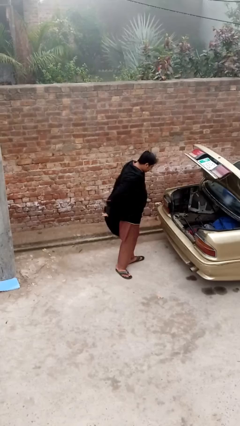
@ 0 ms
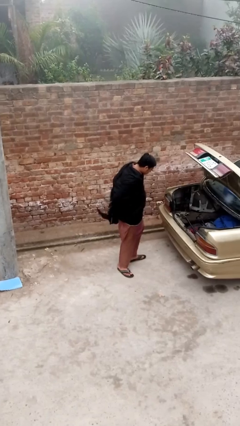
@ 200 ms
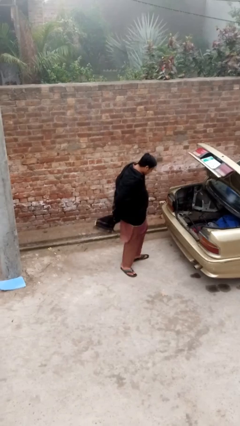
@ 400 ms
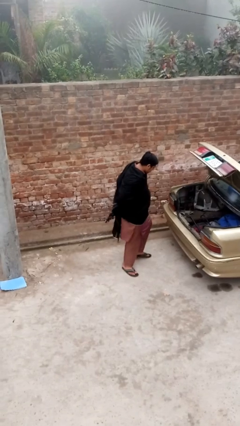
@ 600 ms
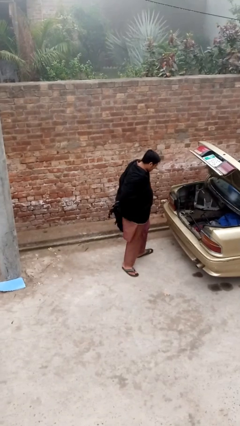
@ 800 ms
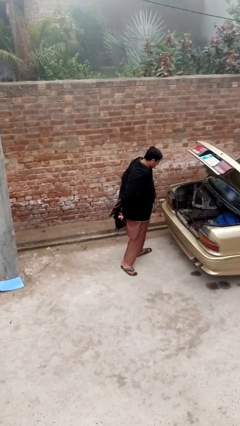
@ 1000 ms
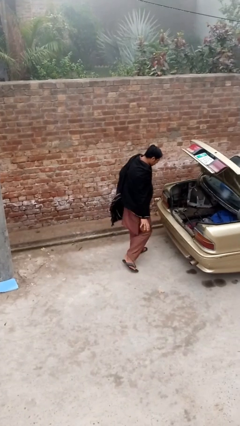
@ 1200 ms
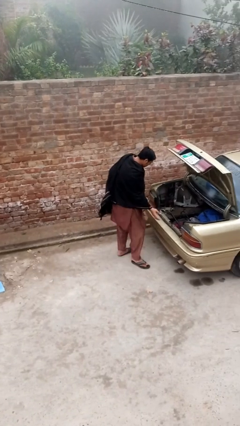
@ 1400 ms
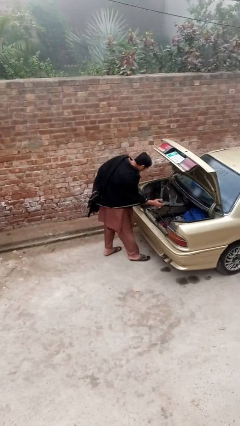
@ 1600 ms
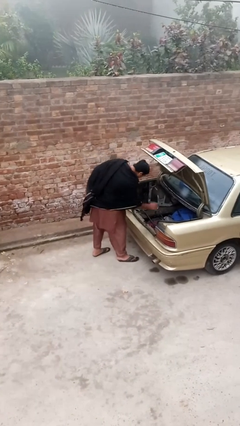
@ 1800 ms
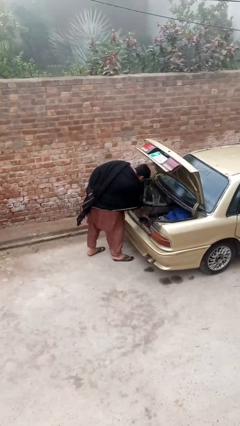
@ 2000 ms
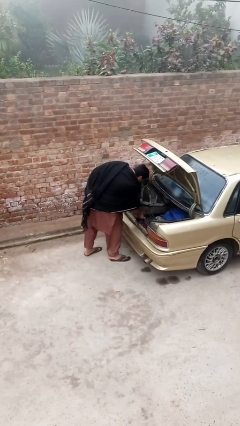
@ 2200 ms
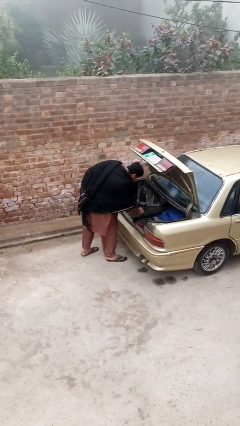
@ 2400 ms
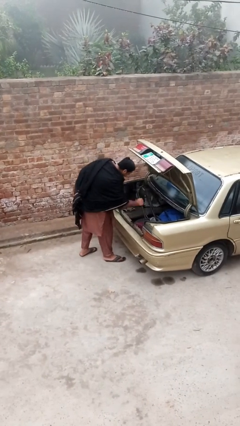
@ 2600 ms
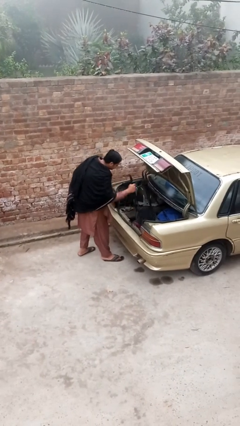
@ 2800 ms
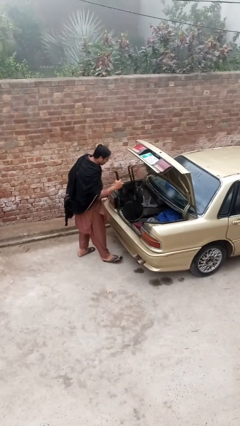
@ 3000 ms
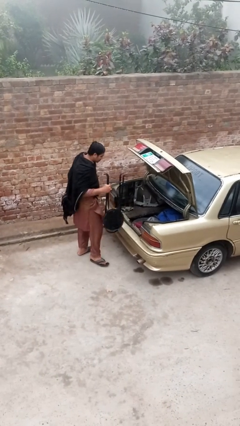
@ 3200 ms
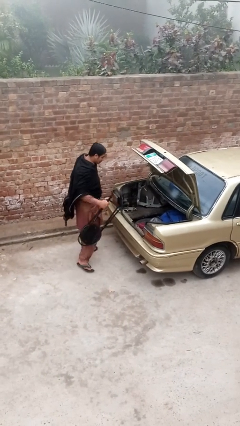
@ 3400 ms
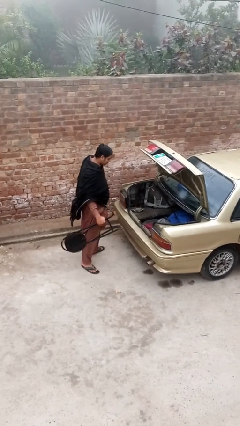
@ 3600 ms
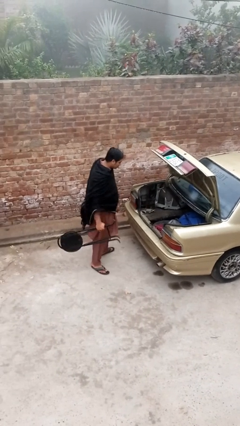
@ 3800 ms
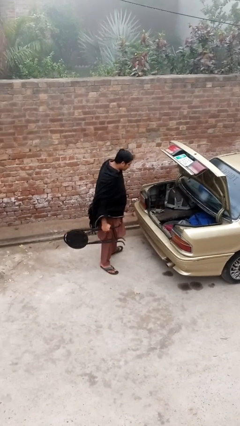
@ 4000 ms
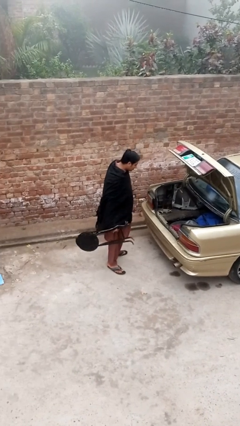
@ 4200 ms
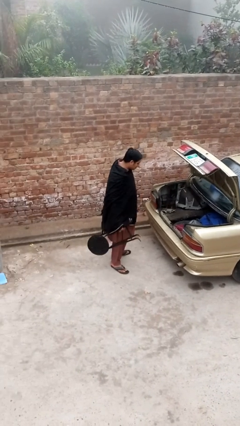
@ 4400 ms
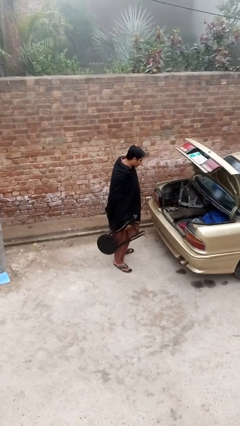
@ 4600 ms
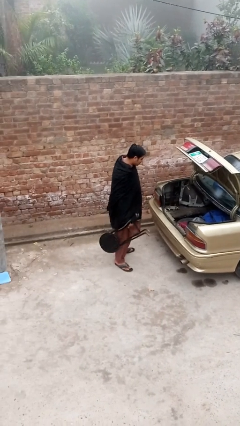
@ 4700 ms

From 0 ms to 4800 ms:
person unloads car

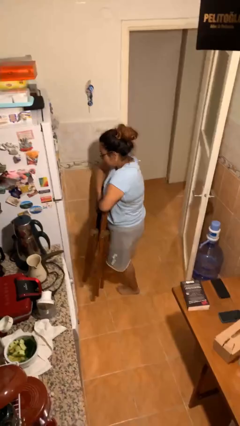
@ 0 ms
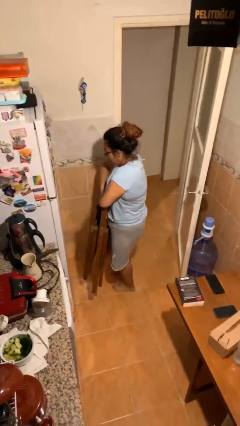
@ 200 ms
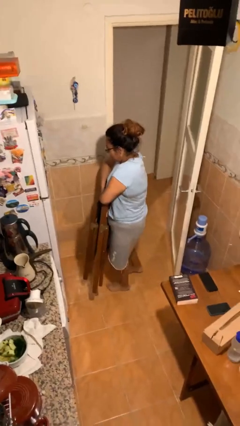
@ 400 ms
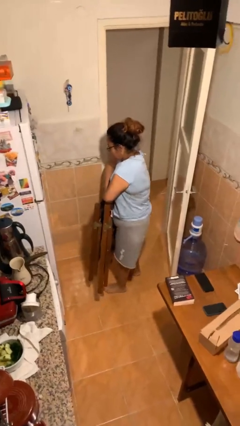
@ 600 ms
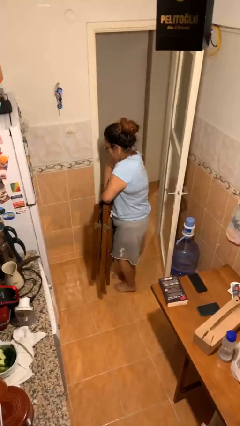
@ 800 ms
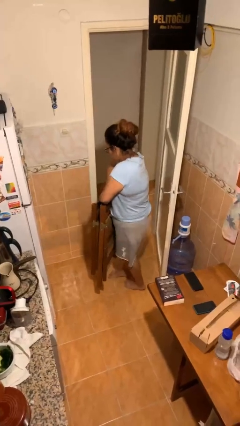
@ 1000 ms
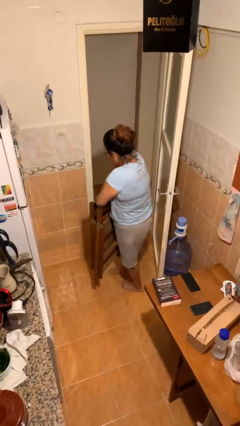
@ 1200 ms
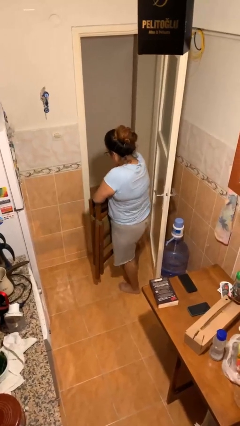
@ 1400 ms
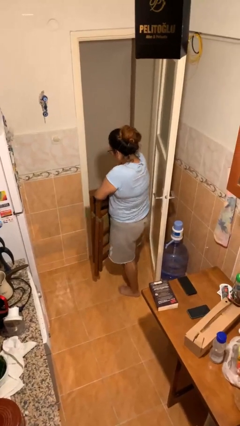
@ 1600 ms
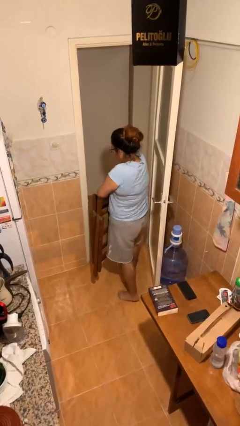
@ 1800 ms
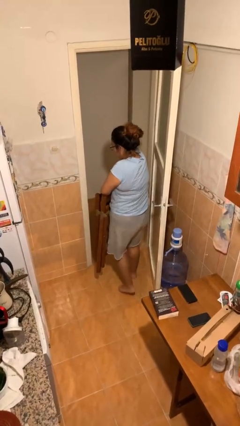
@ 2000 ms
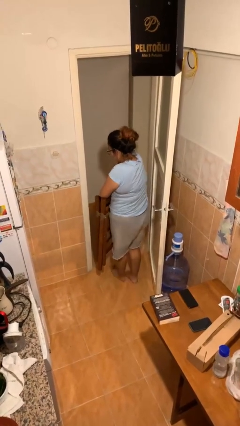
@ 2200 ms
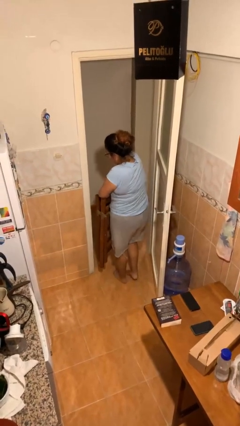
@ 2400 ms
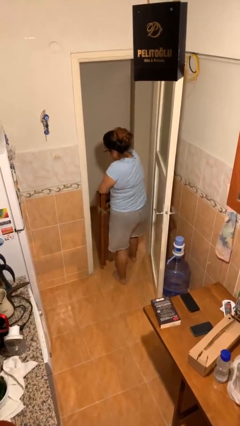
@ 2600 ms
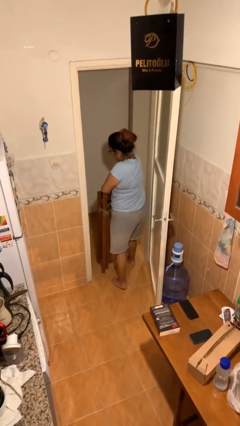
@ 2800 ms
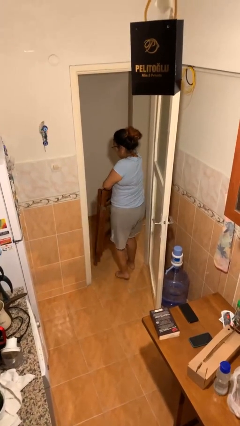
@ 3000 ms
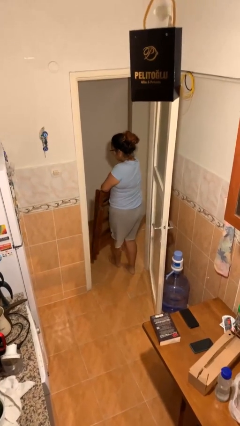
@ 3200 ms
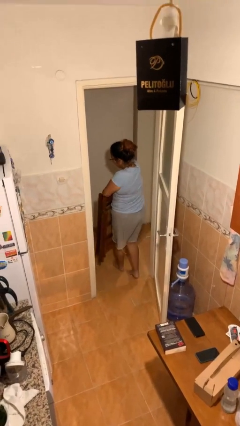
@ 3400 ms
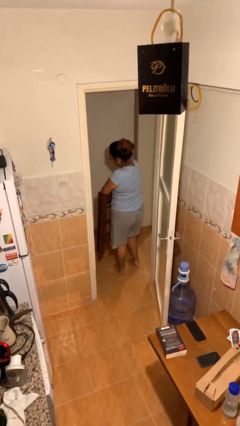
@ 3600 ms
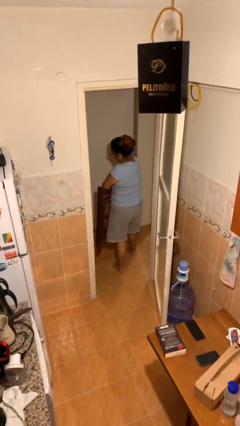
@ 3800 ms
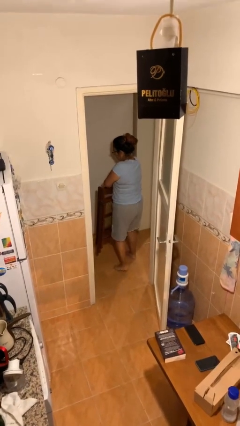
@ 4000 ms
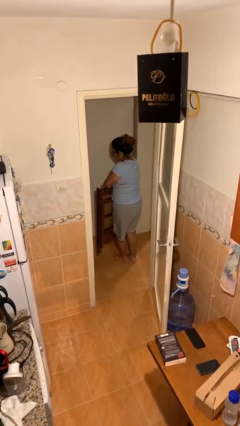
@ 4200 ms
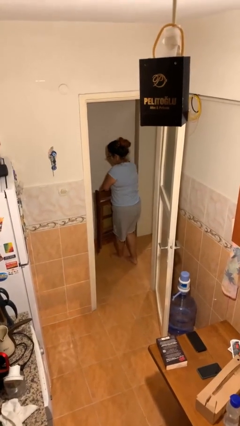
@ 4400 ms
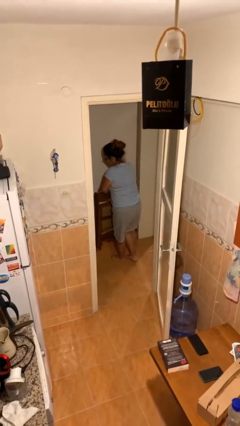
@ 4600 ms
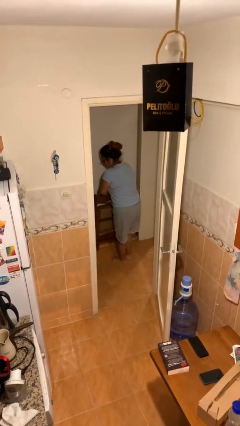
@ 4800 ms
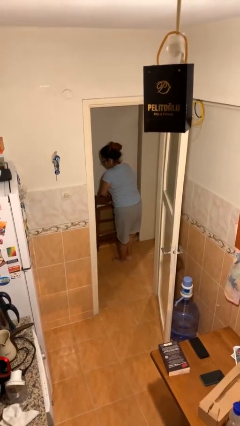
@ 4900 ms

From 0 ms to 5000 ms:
person carries heavy object

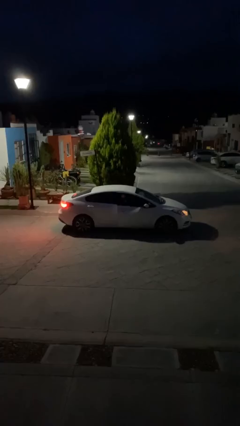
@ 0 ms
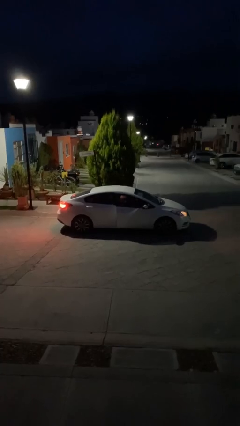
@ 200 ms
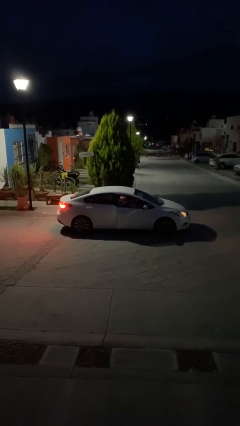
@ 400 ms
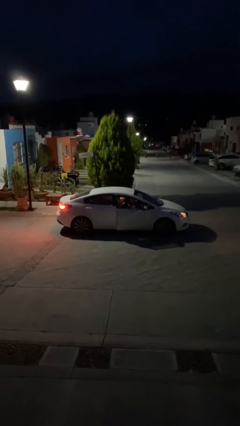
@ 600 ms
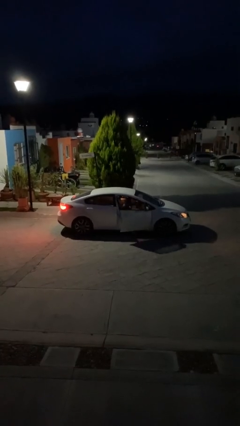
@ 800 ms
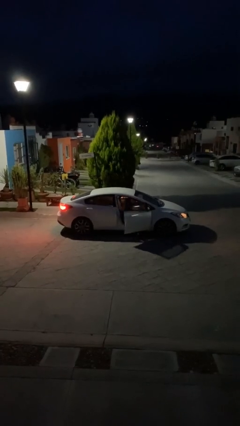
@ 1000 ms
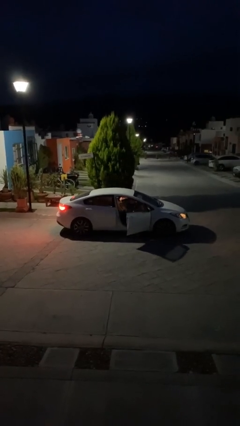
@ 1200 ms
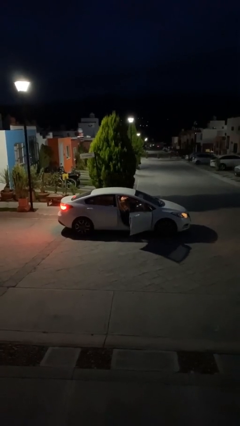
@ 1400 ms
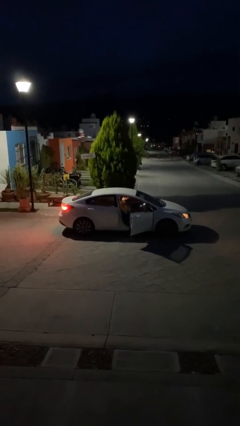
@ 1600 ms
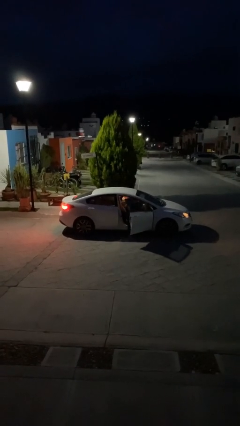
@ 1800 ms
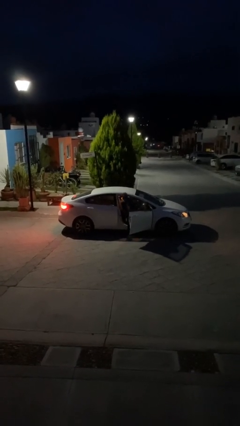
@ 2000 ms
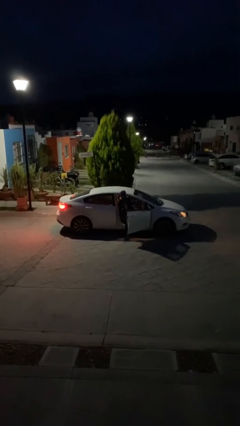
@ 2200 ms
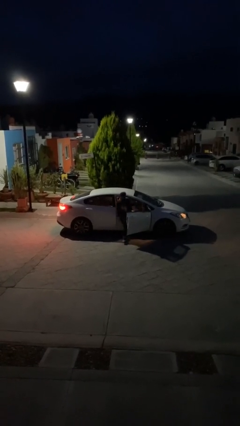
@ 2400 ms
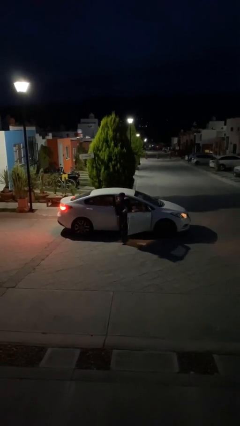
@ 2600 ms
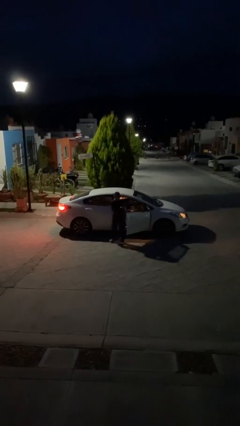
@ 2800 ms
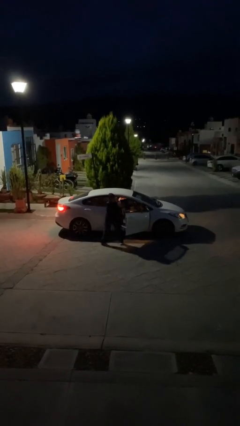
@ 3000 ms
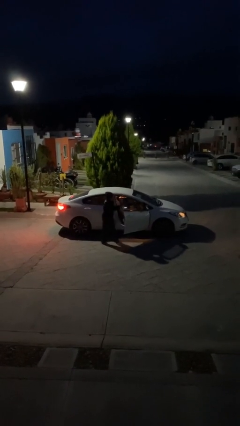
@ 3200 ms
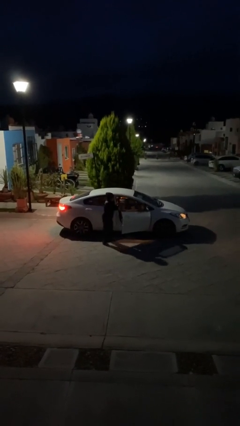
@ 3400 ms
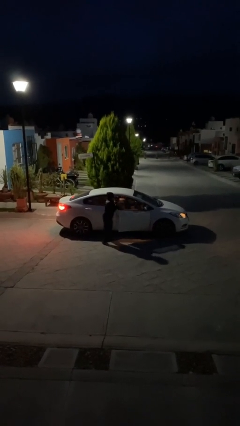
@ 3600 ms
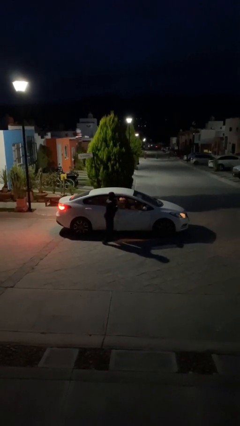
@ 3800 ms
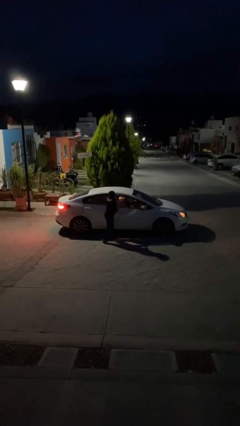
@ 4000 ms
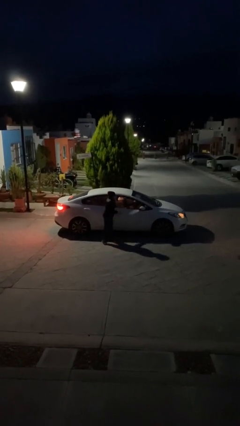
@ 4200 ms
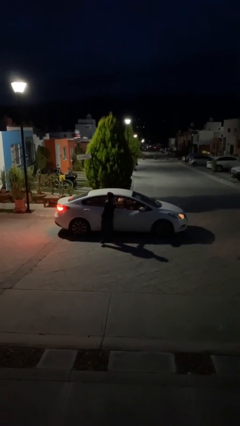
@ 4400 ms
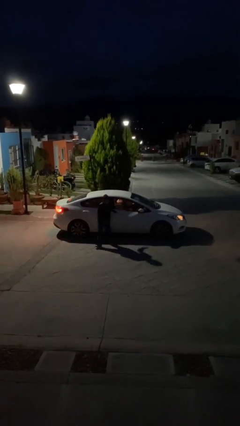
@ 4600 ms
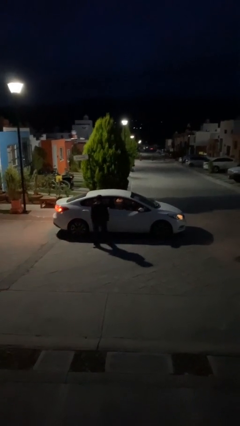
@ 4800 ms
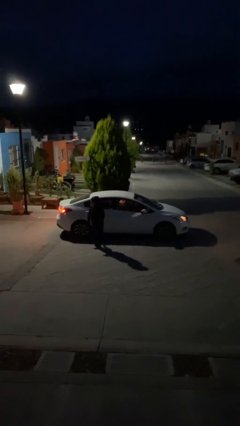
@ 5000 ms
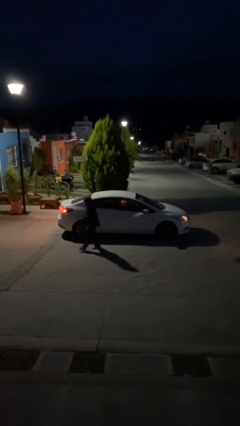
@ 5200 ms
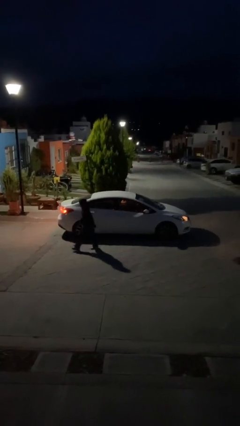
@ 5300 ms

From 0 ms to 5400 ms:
car drops off person

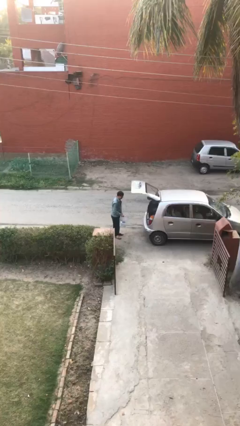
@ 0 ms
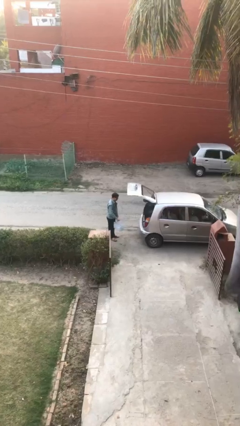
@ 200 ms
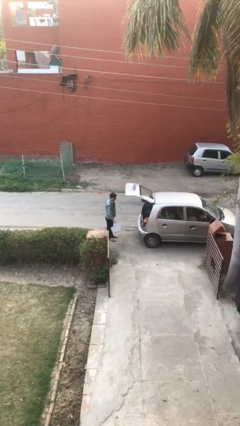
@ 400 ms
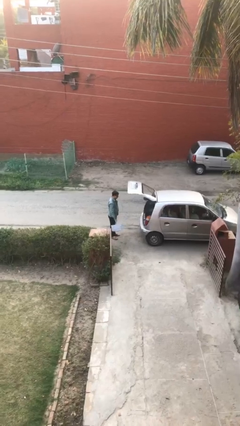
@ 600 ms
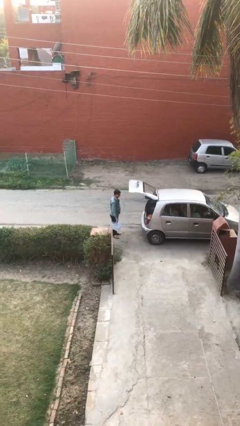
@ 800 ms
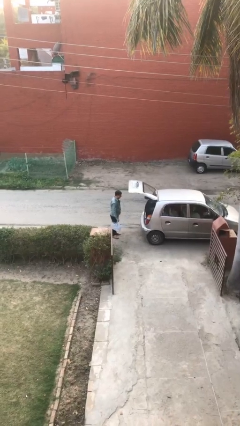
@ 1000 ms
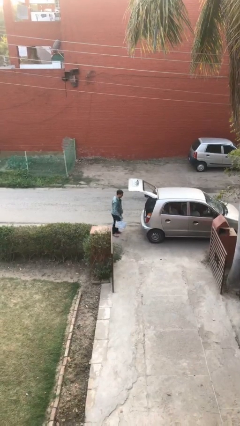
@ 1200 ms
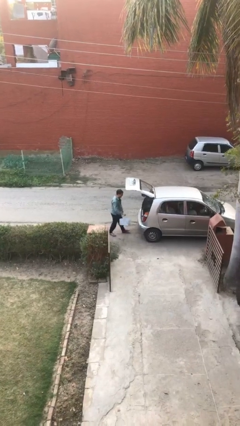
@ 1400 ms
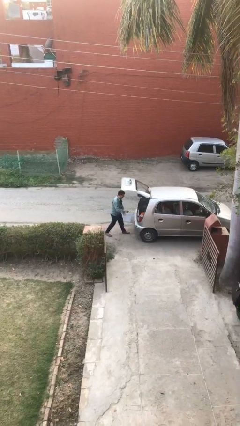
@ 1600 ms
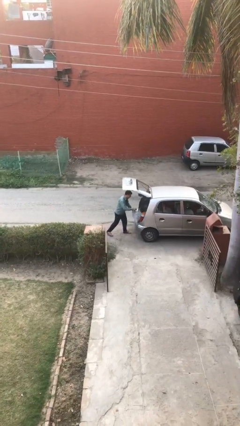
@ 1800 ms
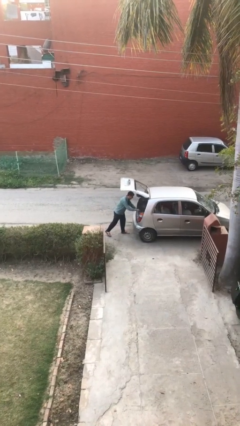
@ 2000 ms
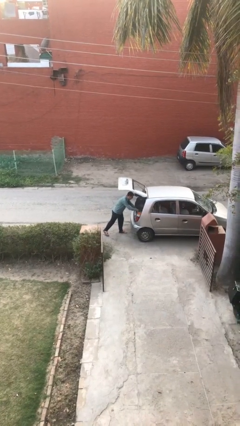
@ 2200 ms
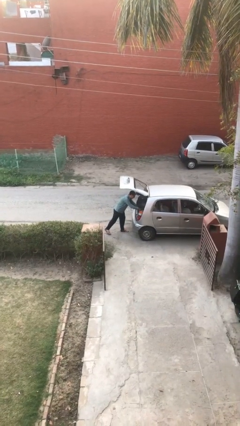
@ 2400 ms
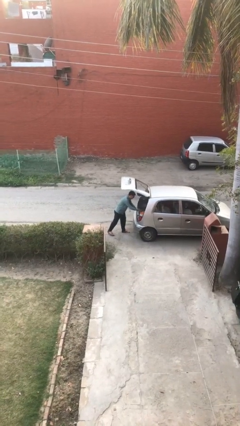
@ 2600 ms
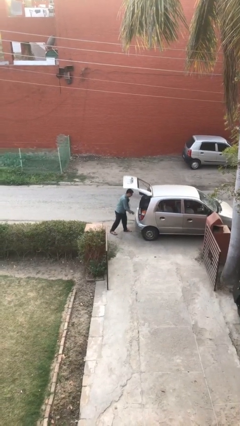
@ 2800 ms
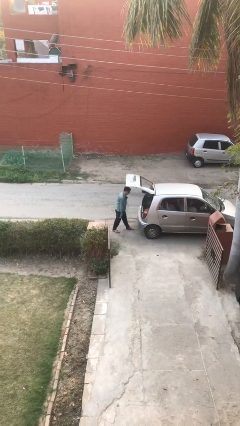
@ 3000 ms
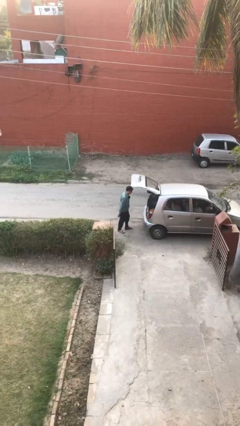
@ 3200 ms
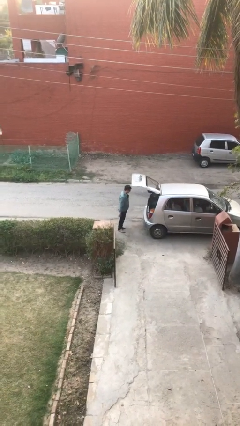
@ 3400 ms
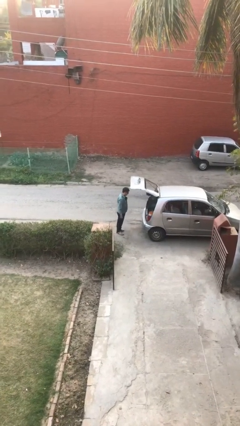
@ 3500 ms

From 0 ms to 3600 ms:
person loads car
